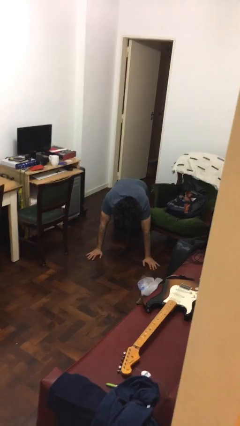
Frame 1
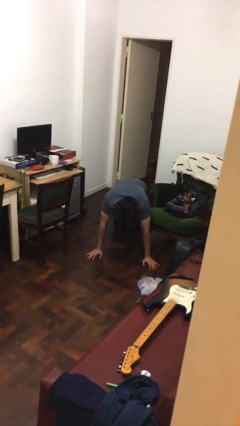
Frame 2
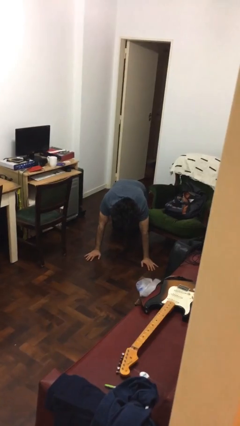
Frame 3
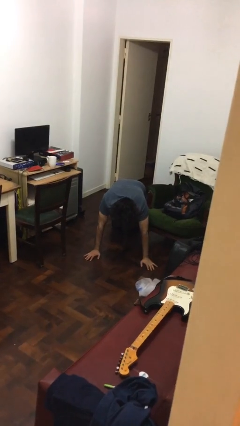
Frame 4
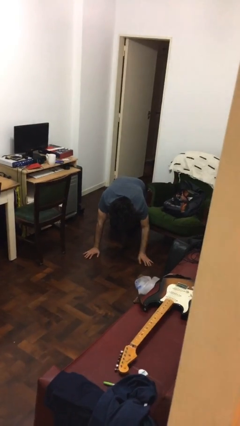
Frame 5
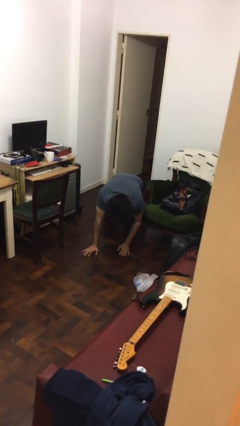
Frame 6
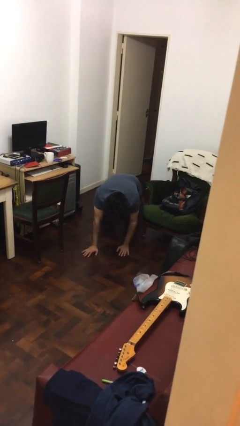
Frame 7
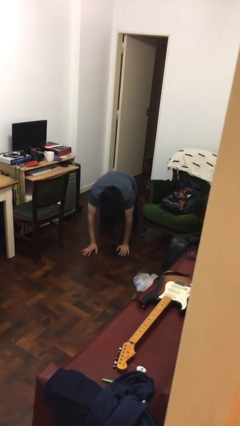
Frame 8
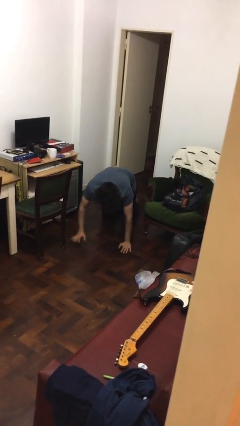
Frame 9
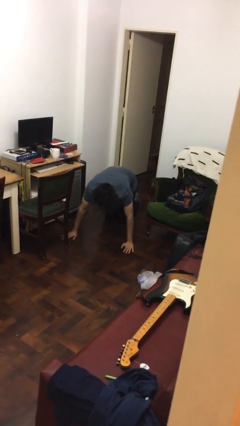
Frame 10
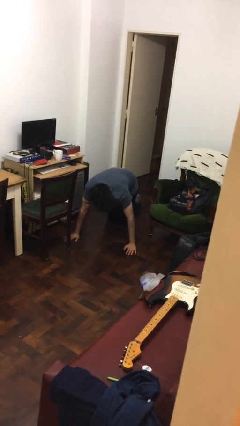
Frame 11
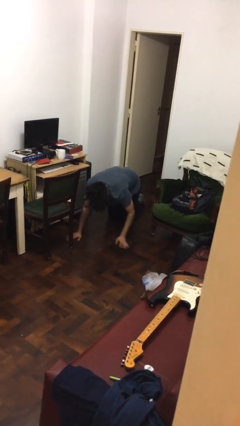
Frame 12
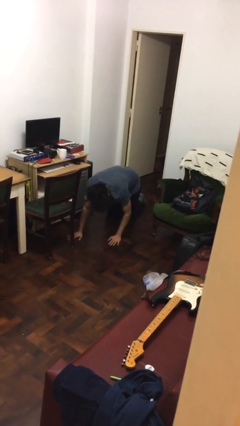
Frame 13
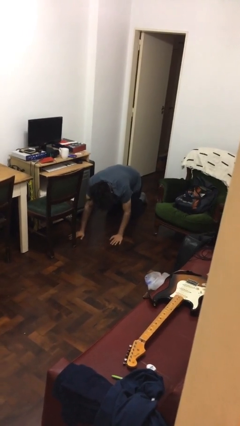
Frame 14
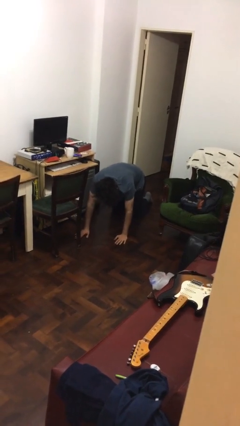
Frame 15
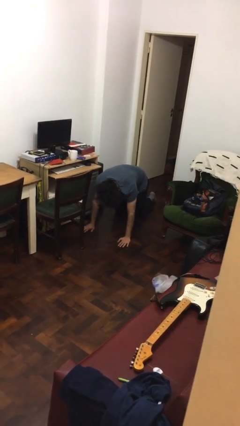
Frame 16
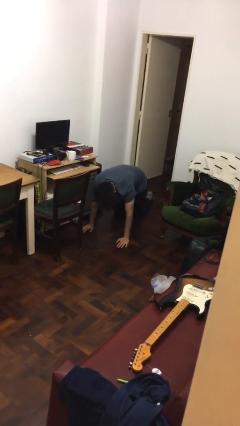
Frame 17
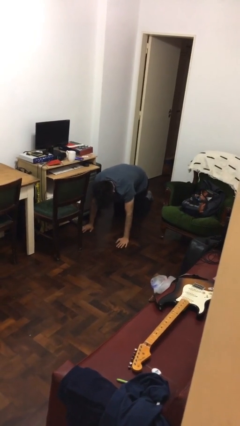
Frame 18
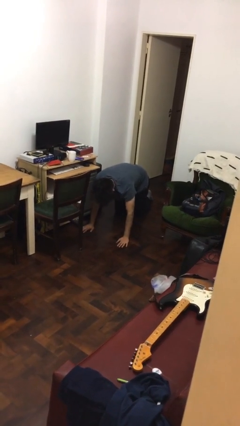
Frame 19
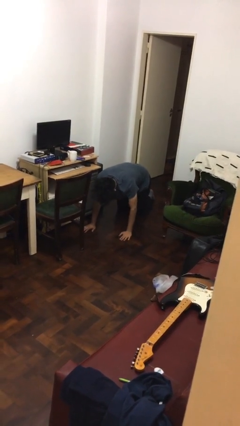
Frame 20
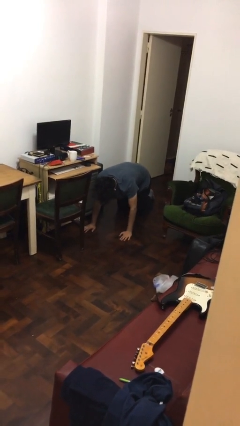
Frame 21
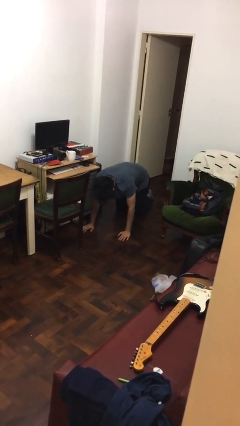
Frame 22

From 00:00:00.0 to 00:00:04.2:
person crawls

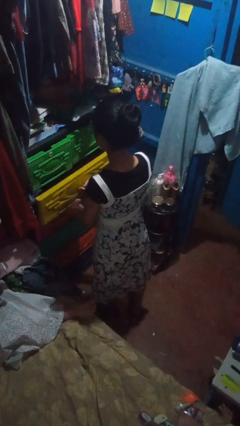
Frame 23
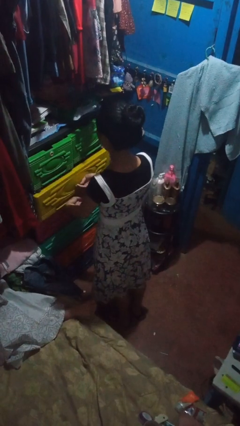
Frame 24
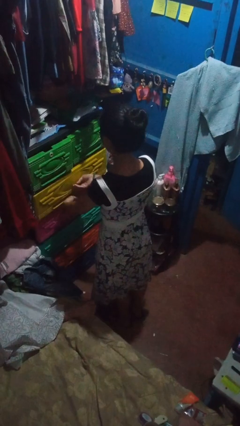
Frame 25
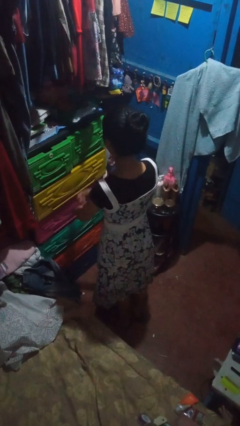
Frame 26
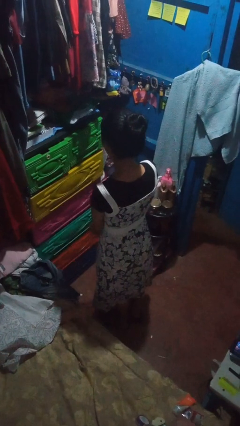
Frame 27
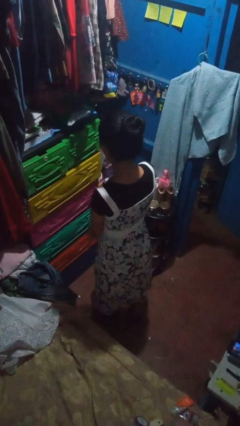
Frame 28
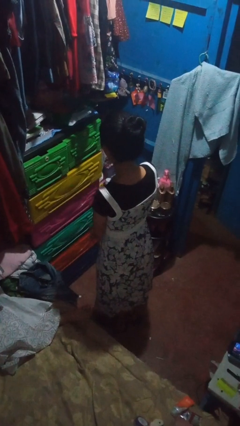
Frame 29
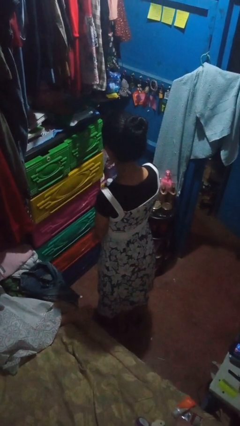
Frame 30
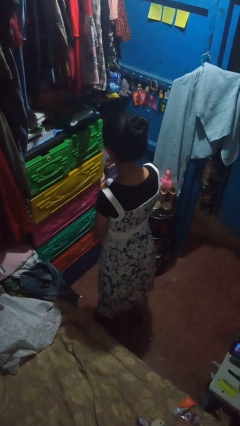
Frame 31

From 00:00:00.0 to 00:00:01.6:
person closes dresser drawer

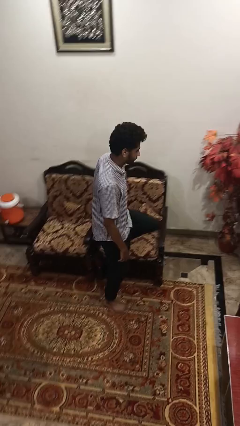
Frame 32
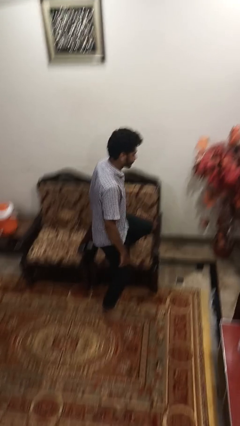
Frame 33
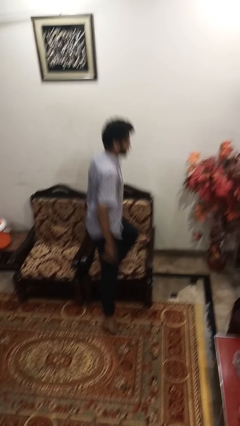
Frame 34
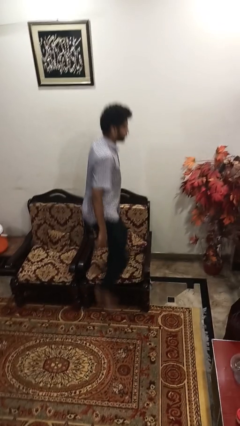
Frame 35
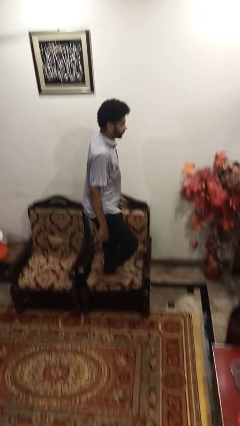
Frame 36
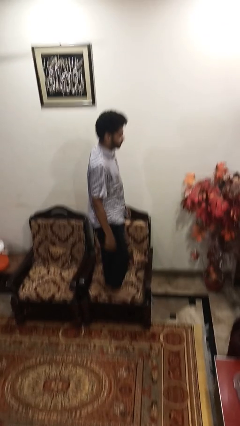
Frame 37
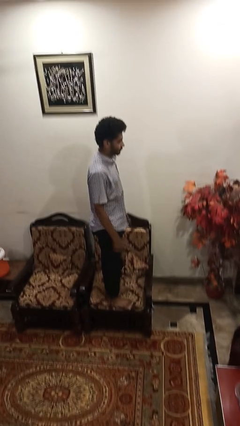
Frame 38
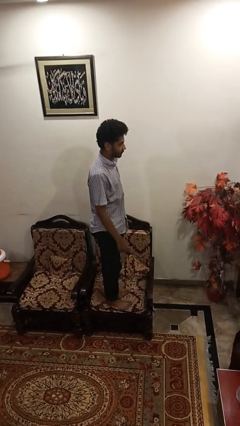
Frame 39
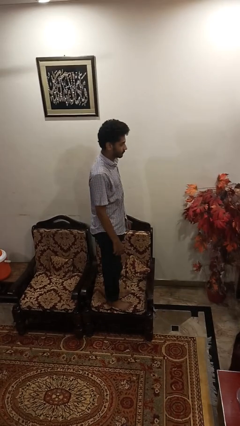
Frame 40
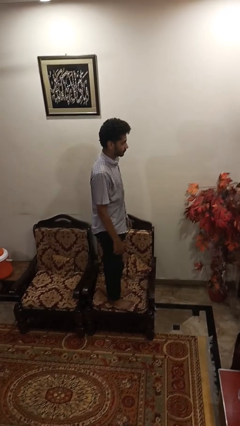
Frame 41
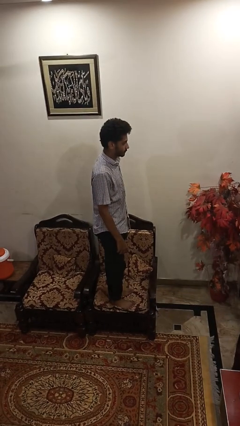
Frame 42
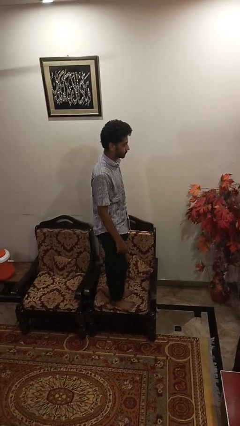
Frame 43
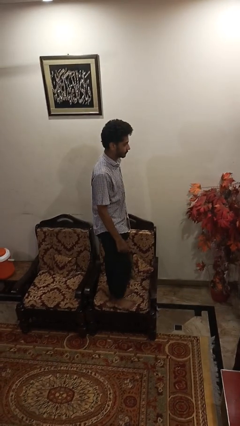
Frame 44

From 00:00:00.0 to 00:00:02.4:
person climbs on couch

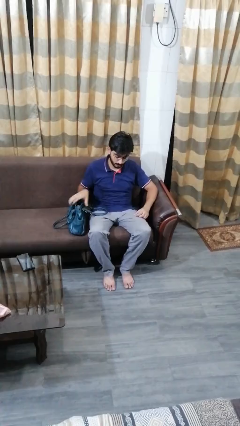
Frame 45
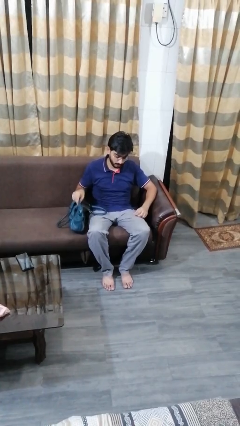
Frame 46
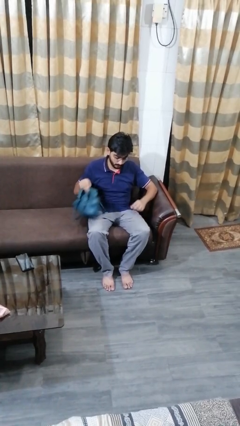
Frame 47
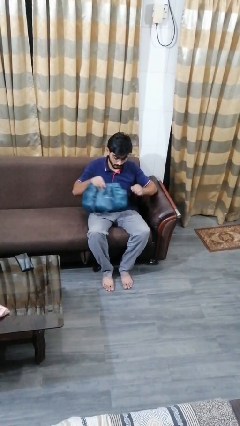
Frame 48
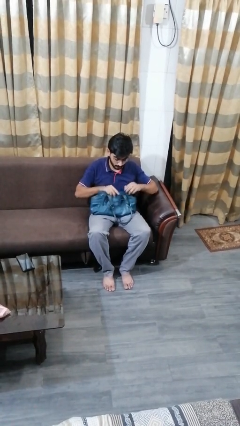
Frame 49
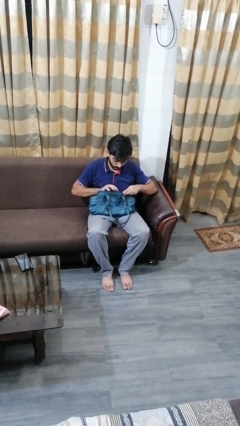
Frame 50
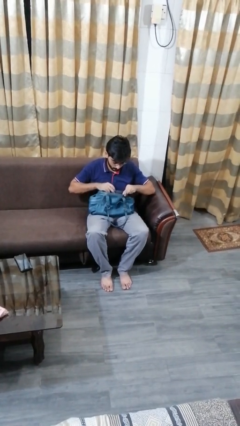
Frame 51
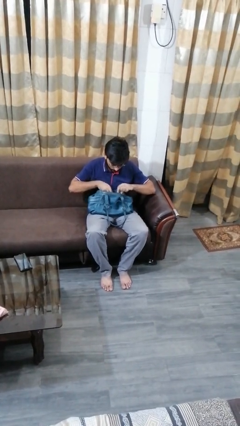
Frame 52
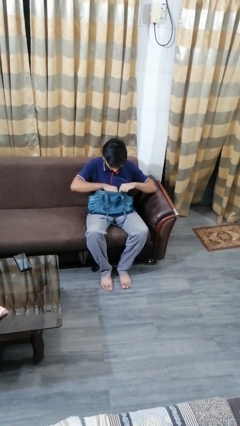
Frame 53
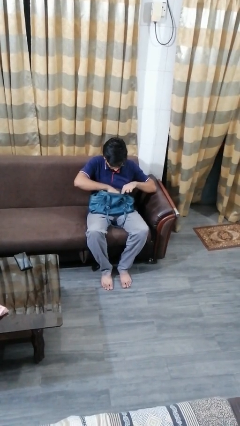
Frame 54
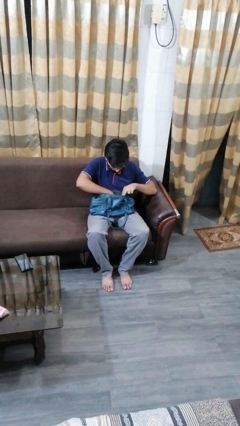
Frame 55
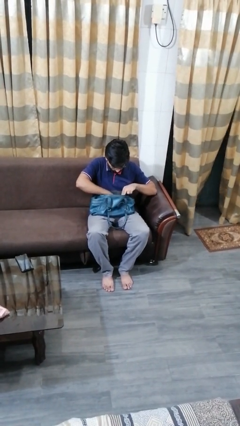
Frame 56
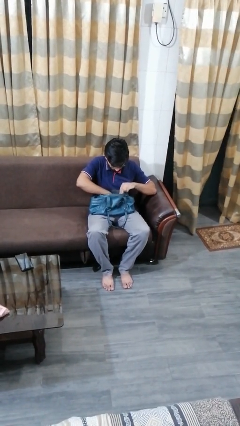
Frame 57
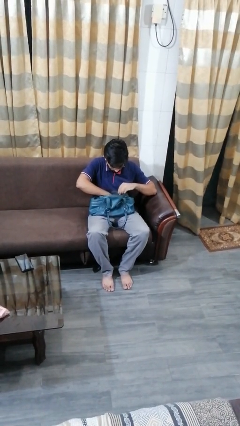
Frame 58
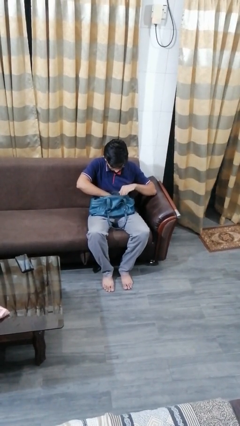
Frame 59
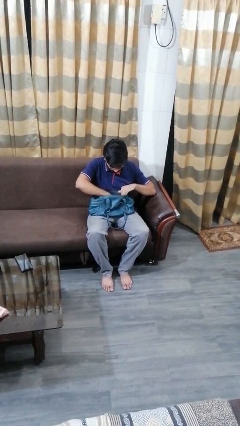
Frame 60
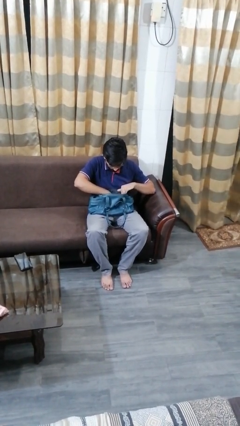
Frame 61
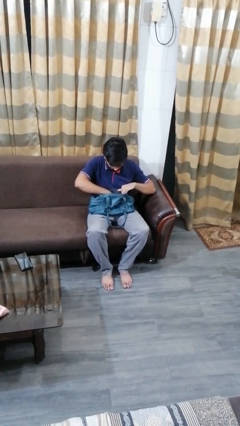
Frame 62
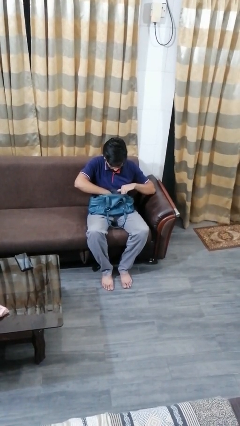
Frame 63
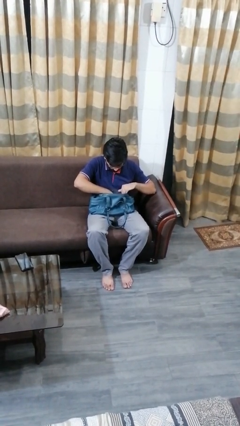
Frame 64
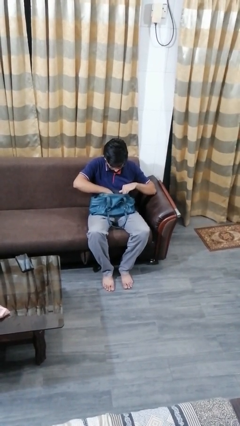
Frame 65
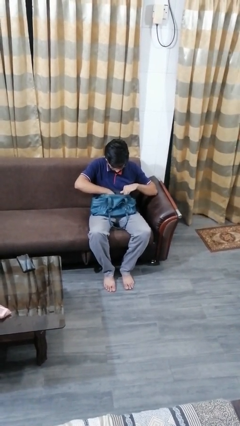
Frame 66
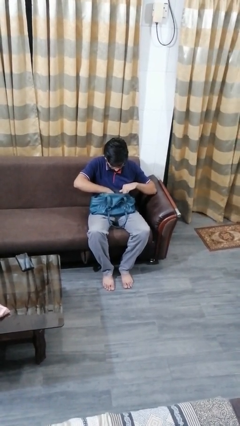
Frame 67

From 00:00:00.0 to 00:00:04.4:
person searches in purse

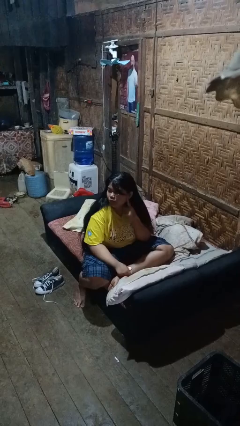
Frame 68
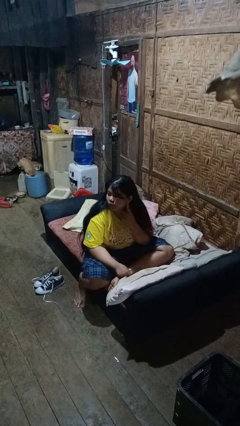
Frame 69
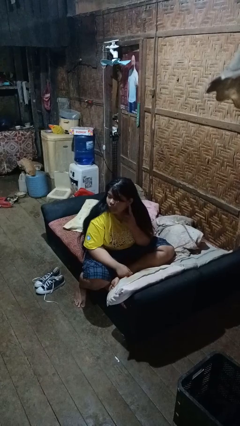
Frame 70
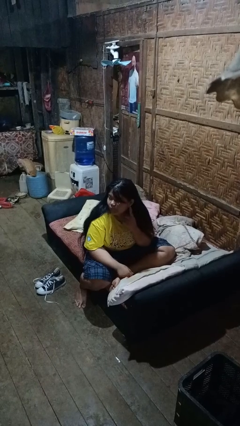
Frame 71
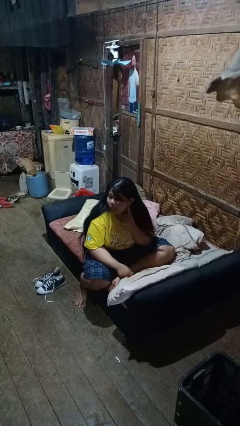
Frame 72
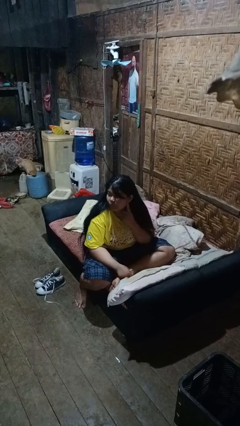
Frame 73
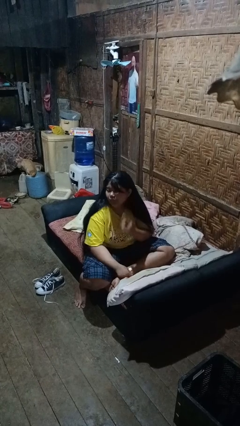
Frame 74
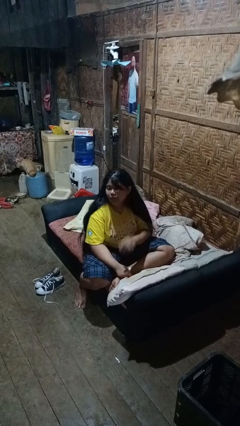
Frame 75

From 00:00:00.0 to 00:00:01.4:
person gestures listen closely

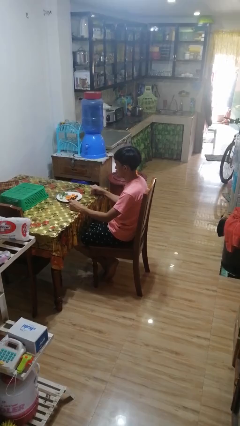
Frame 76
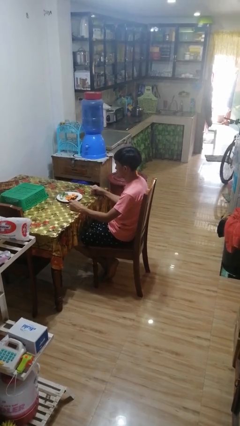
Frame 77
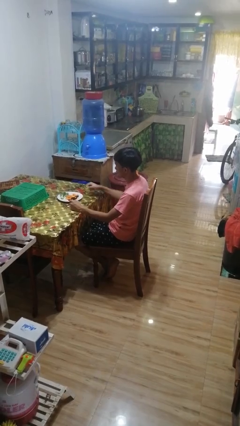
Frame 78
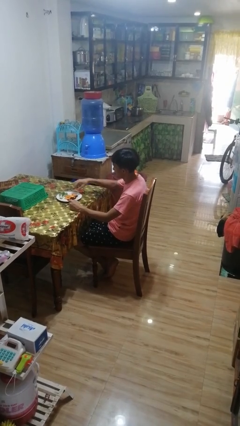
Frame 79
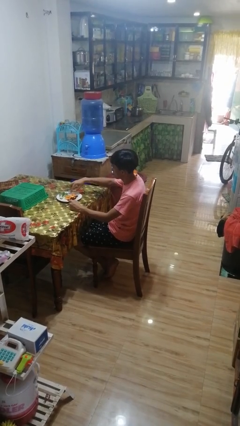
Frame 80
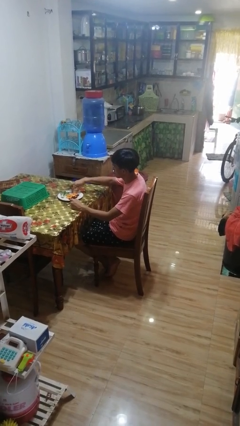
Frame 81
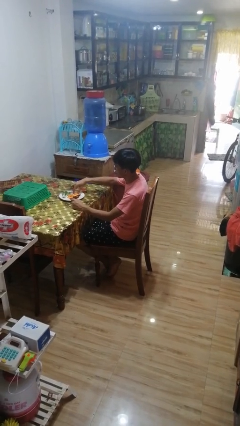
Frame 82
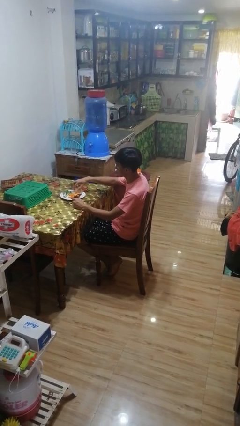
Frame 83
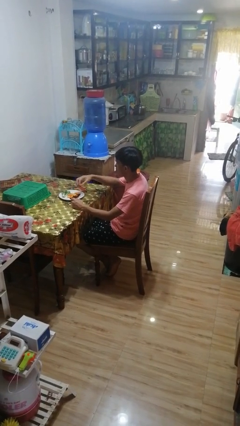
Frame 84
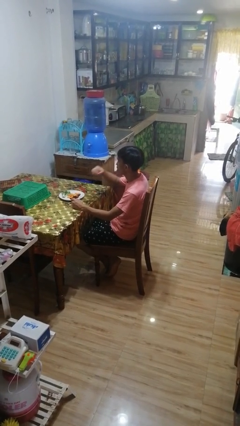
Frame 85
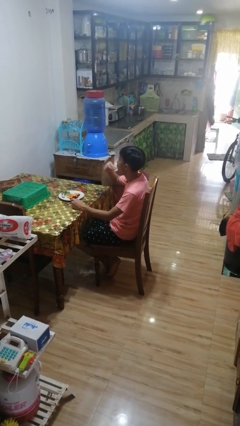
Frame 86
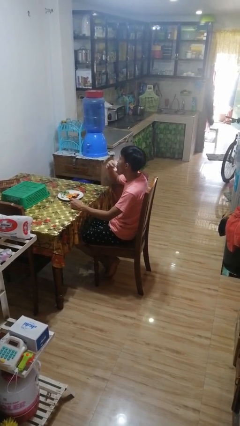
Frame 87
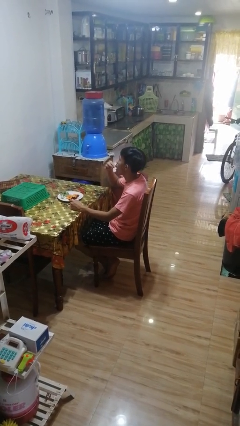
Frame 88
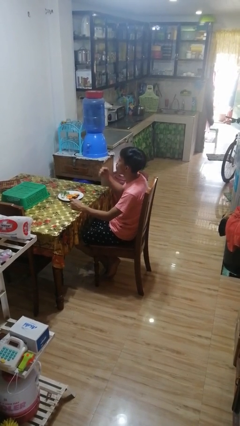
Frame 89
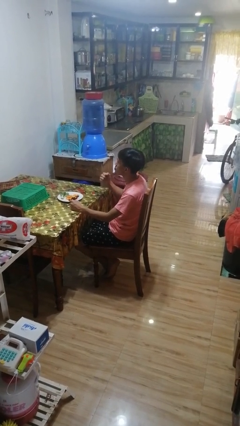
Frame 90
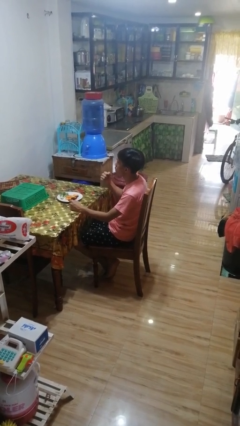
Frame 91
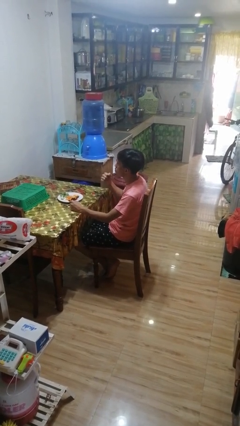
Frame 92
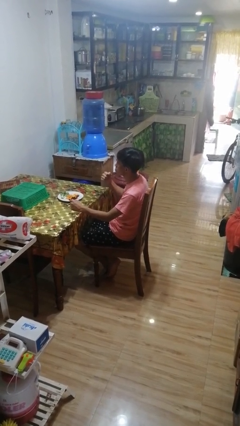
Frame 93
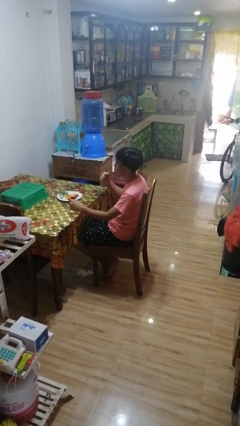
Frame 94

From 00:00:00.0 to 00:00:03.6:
person eats with hands
